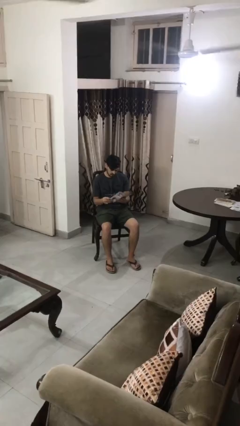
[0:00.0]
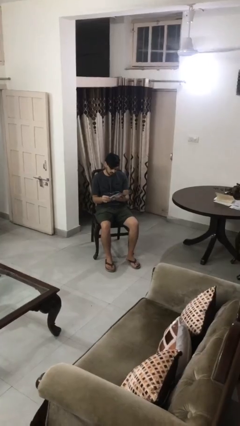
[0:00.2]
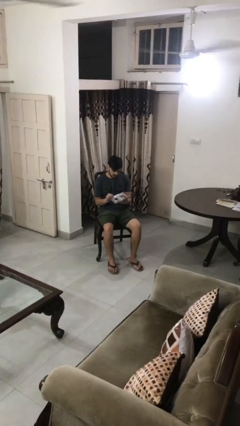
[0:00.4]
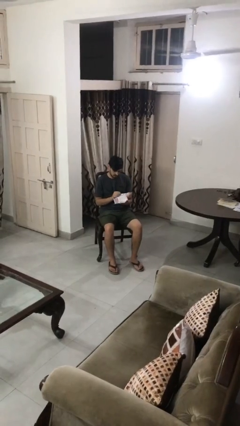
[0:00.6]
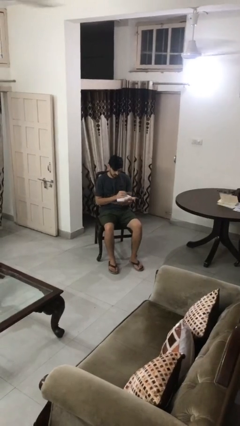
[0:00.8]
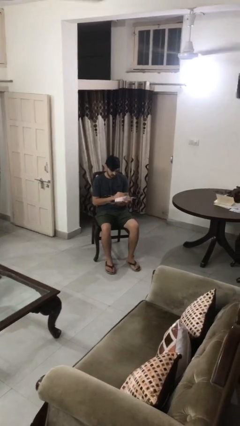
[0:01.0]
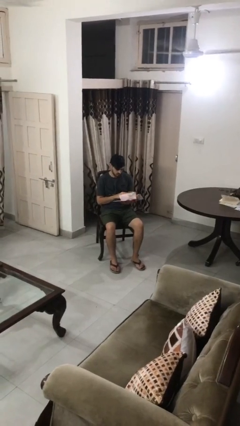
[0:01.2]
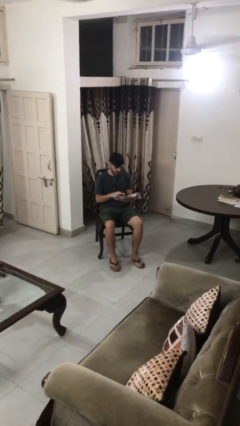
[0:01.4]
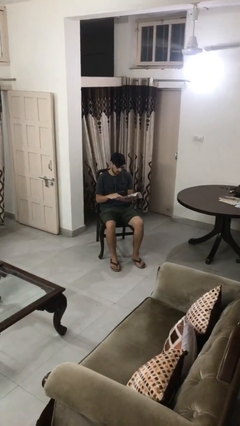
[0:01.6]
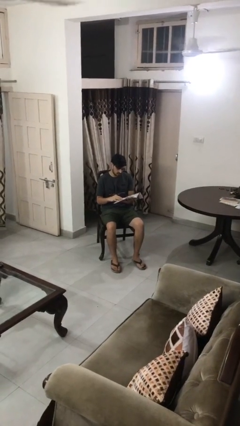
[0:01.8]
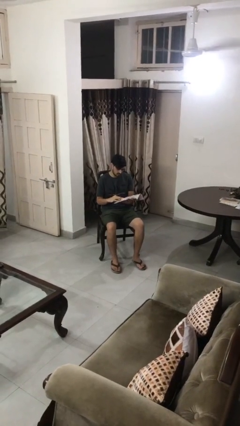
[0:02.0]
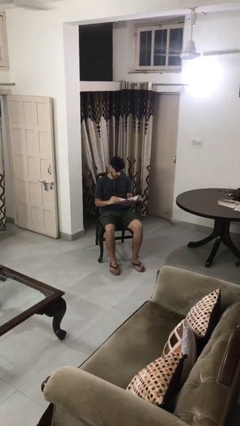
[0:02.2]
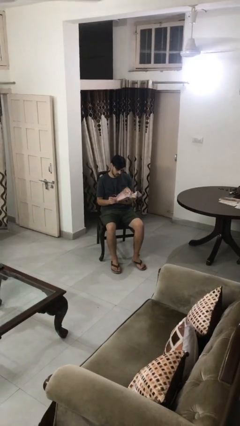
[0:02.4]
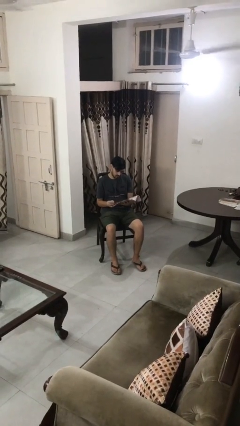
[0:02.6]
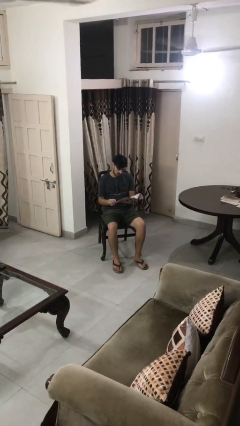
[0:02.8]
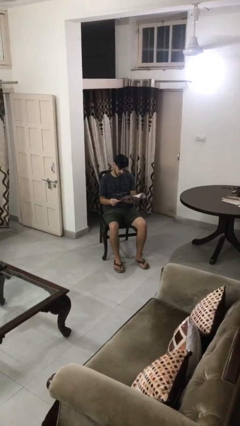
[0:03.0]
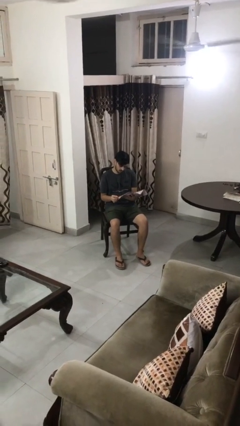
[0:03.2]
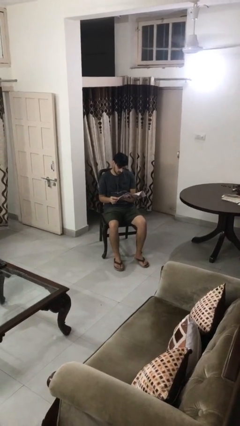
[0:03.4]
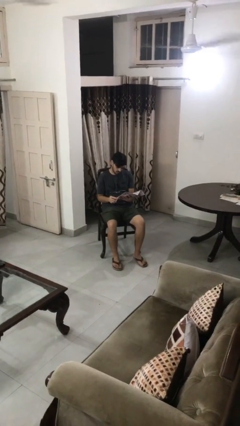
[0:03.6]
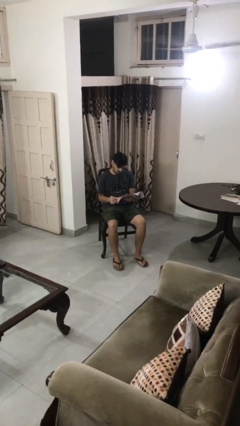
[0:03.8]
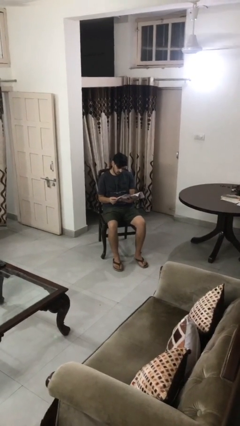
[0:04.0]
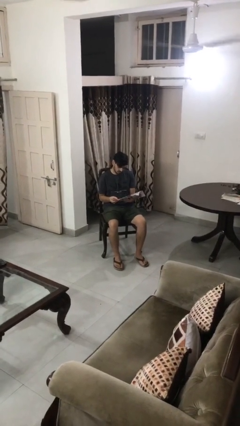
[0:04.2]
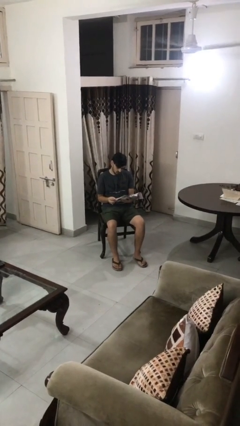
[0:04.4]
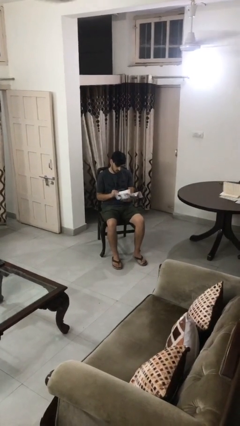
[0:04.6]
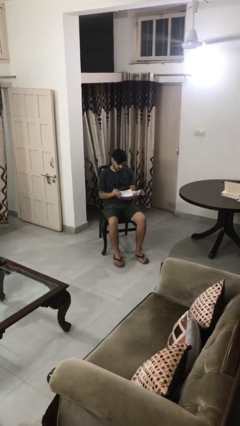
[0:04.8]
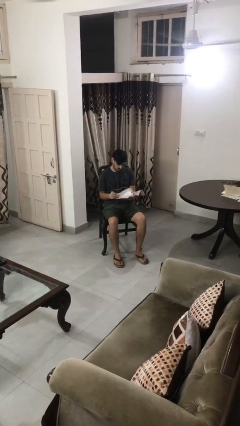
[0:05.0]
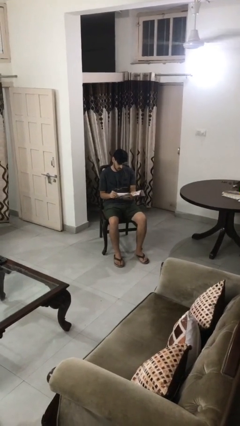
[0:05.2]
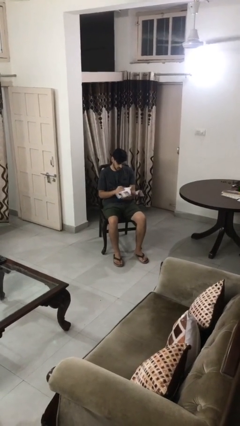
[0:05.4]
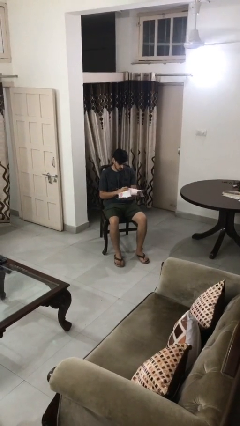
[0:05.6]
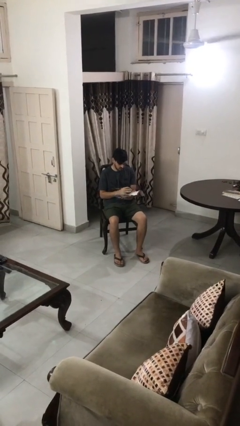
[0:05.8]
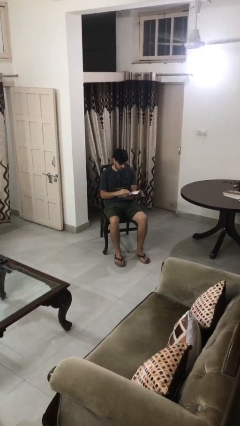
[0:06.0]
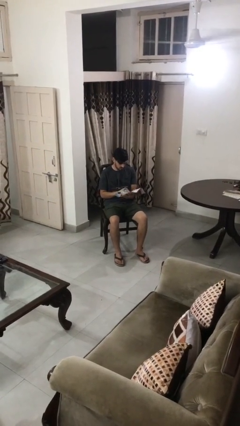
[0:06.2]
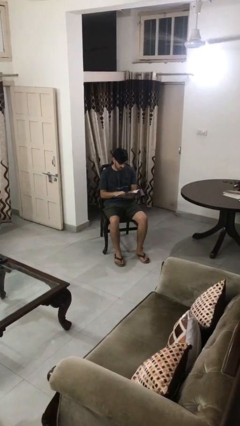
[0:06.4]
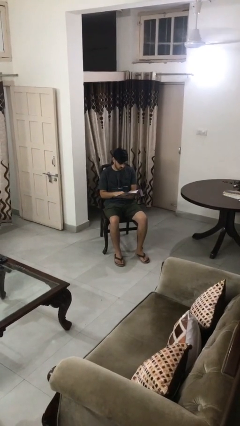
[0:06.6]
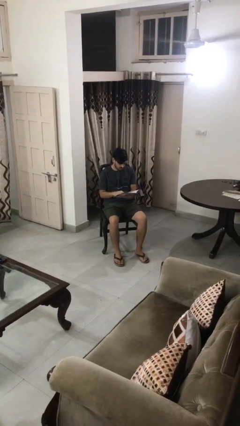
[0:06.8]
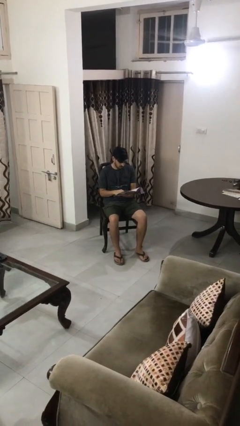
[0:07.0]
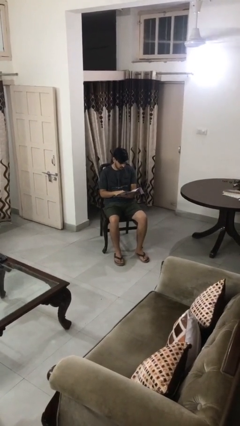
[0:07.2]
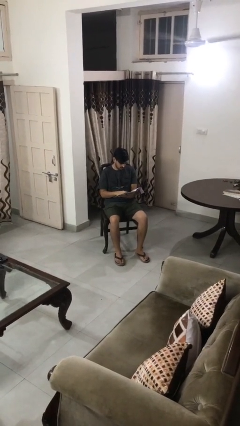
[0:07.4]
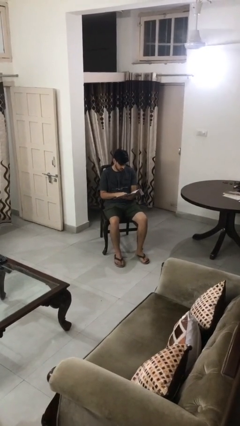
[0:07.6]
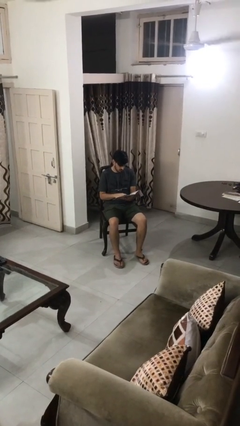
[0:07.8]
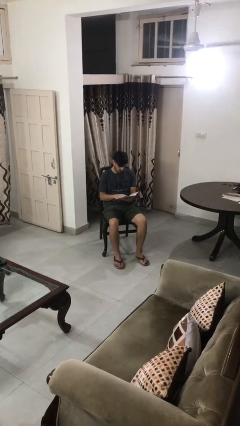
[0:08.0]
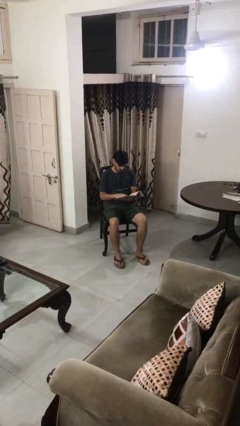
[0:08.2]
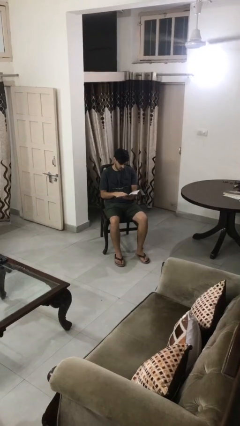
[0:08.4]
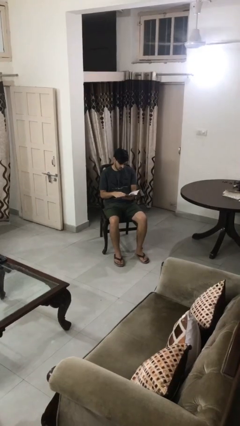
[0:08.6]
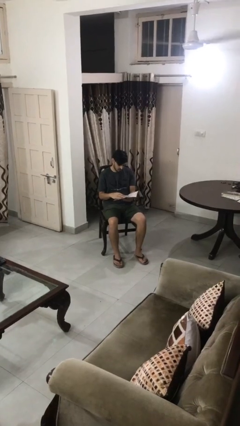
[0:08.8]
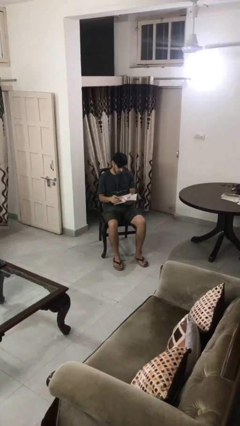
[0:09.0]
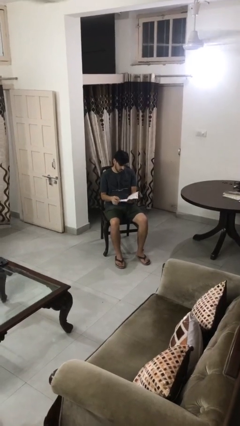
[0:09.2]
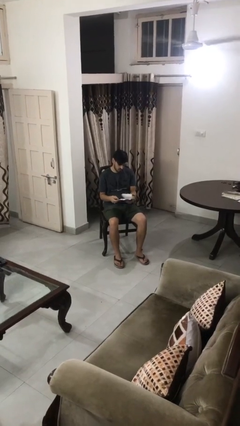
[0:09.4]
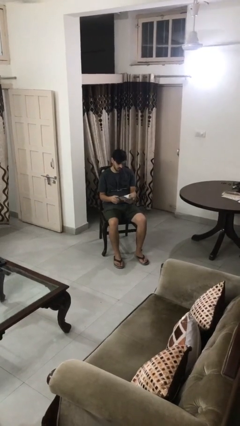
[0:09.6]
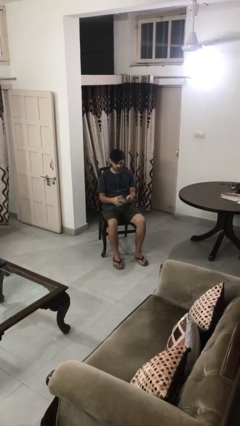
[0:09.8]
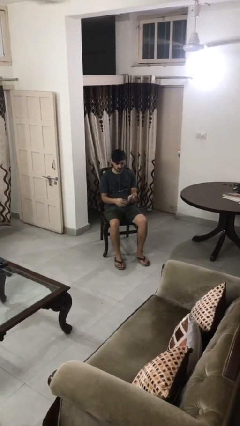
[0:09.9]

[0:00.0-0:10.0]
person reads magazine

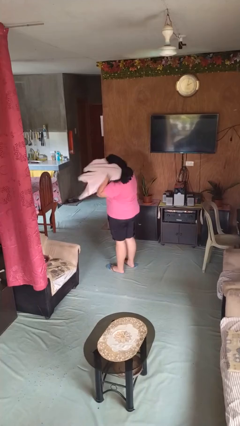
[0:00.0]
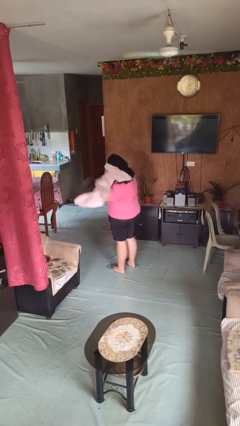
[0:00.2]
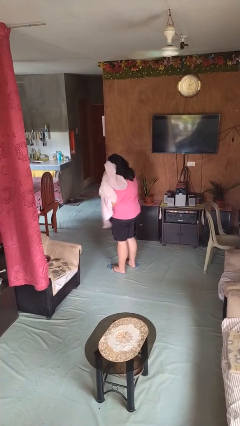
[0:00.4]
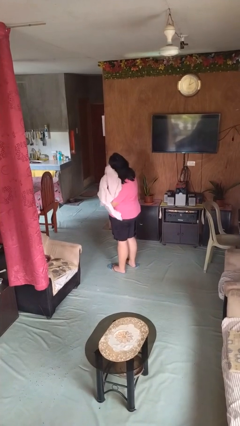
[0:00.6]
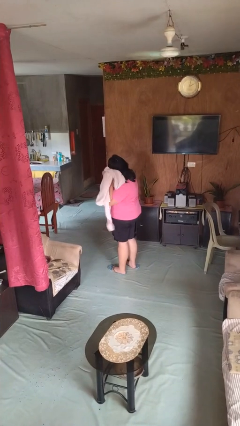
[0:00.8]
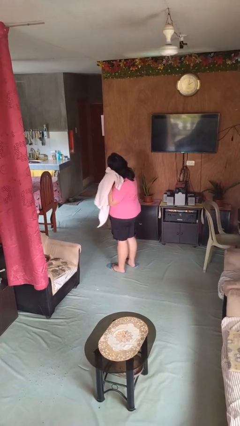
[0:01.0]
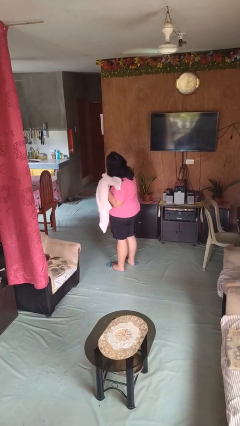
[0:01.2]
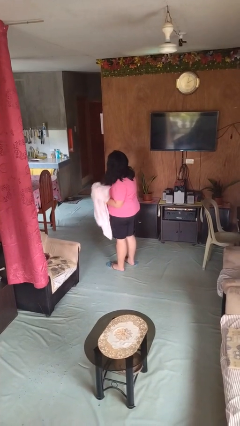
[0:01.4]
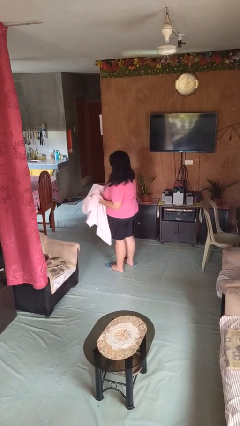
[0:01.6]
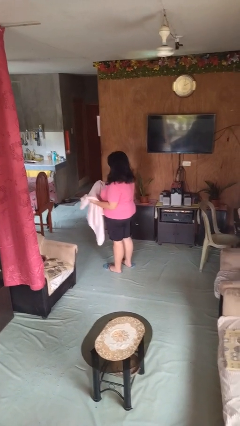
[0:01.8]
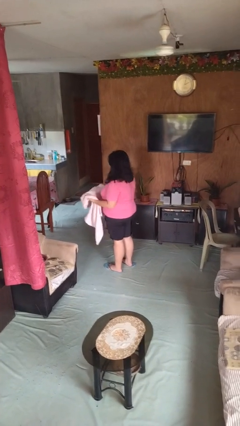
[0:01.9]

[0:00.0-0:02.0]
person dries hair with towel

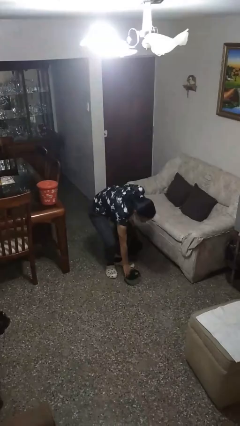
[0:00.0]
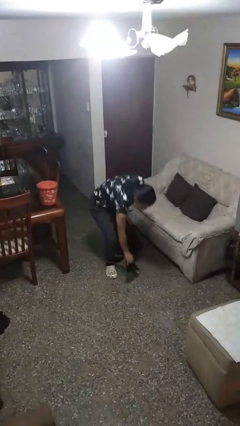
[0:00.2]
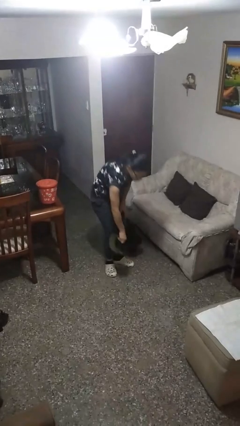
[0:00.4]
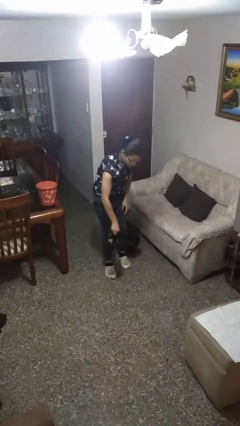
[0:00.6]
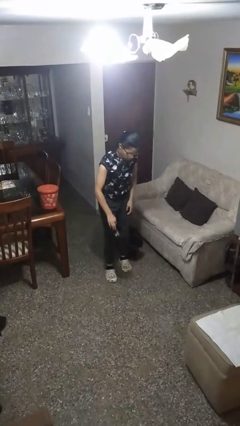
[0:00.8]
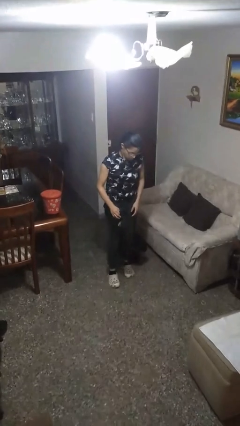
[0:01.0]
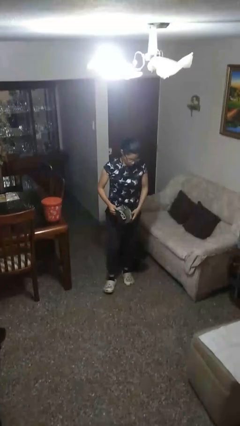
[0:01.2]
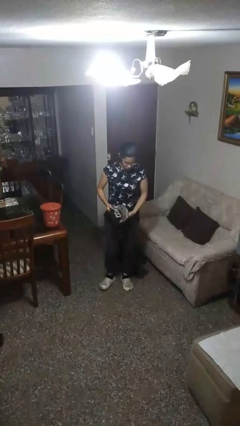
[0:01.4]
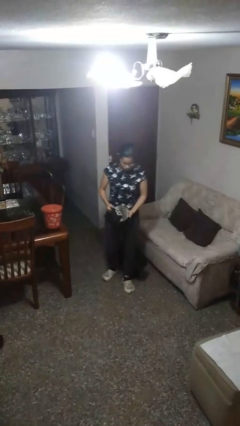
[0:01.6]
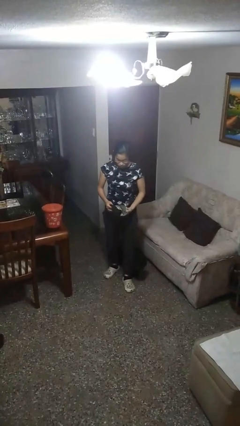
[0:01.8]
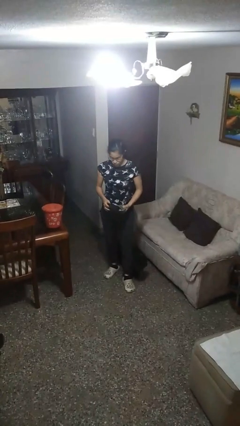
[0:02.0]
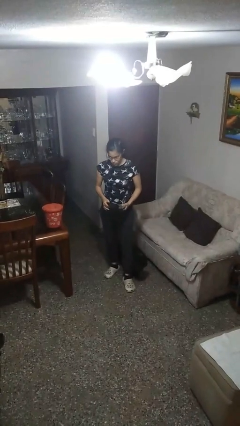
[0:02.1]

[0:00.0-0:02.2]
person picks up object from floor

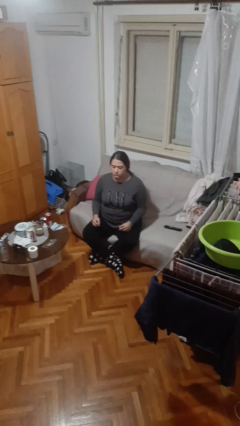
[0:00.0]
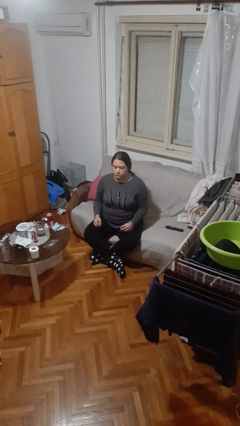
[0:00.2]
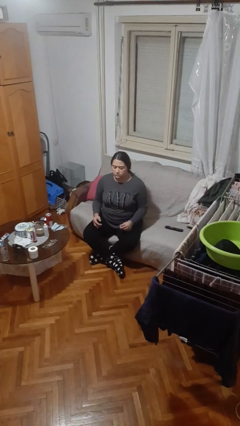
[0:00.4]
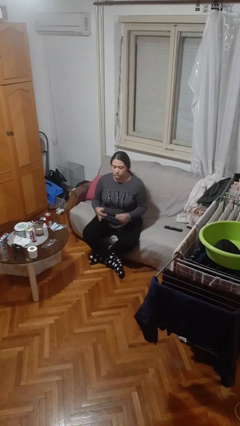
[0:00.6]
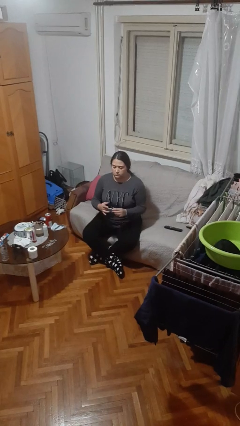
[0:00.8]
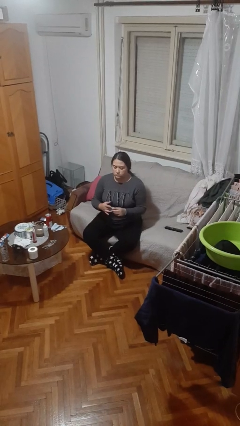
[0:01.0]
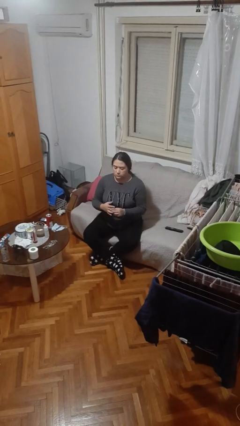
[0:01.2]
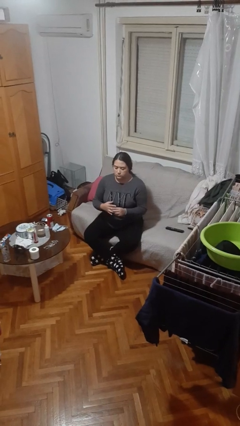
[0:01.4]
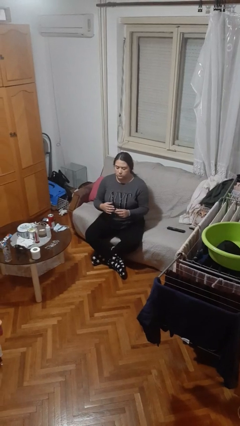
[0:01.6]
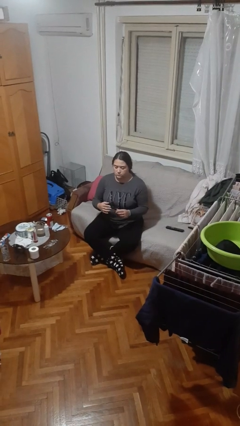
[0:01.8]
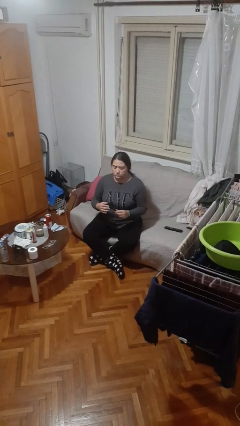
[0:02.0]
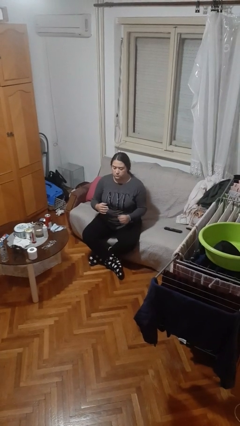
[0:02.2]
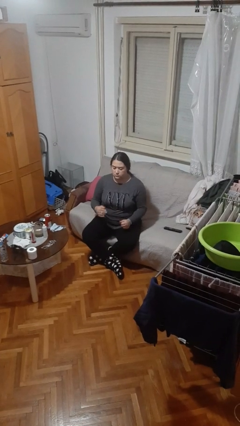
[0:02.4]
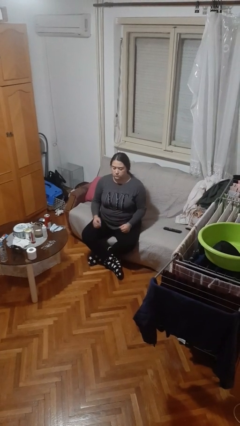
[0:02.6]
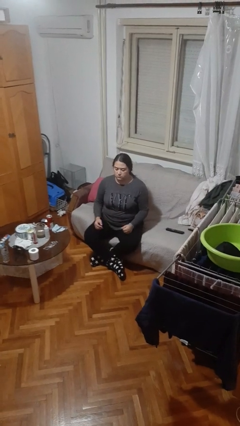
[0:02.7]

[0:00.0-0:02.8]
person puts on ring

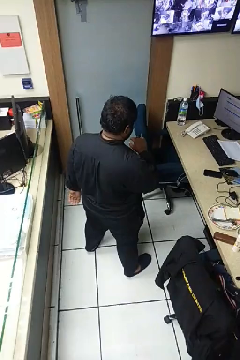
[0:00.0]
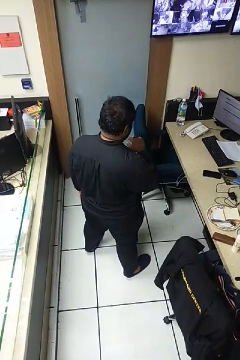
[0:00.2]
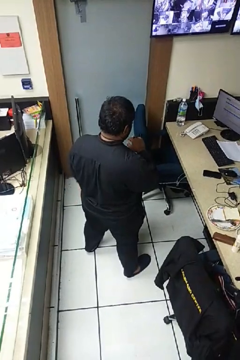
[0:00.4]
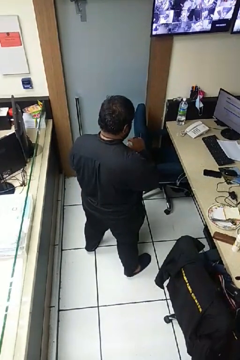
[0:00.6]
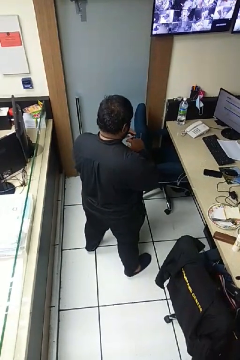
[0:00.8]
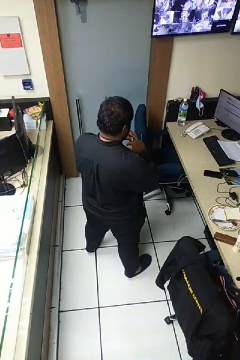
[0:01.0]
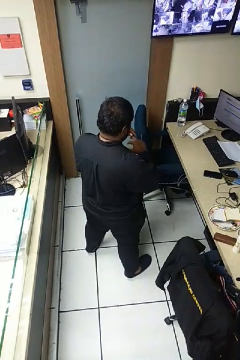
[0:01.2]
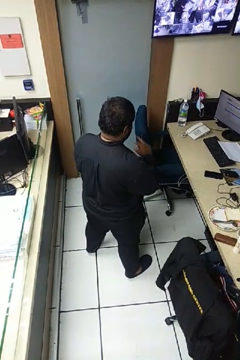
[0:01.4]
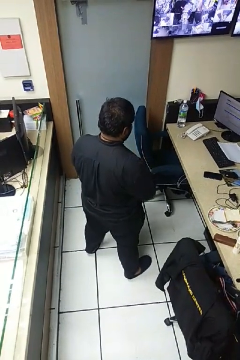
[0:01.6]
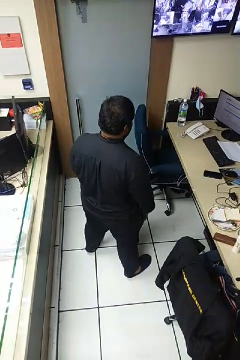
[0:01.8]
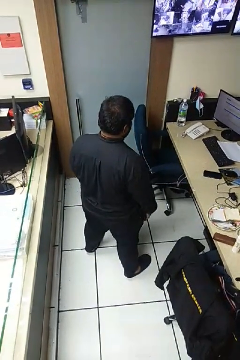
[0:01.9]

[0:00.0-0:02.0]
person takes off ring
